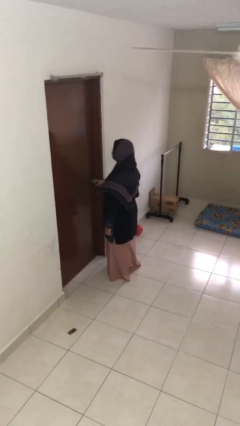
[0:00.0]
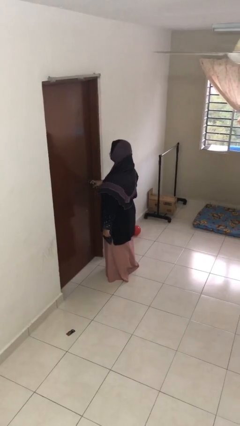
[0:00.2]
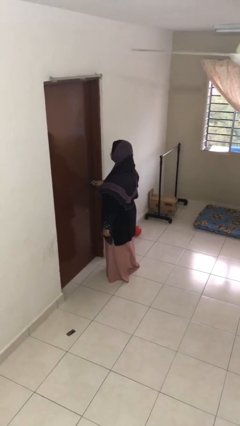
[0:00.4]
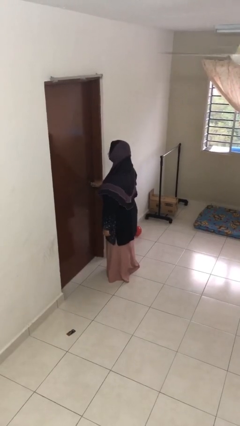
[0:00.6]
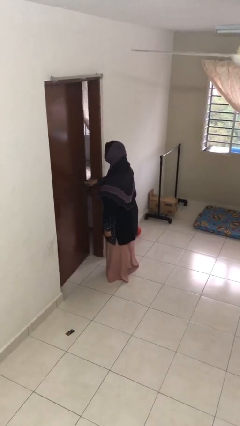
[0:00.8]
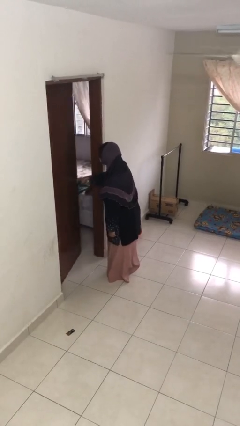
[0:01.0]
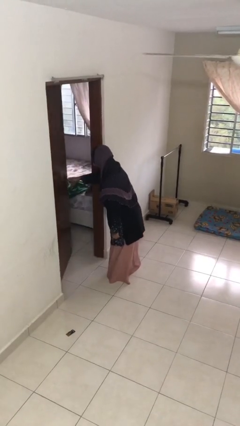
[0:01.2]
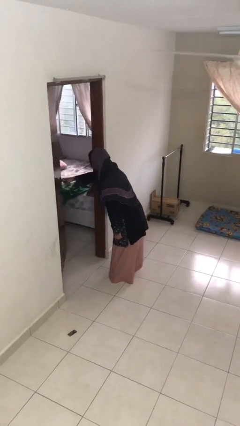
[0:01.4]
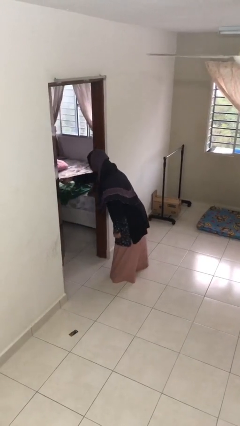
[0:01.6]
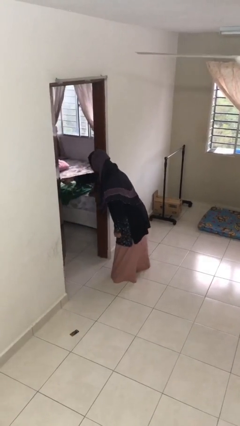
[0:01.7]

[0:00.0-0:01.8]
person opens facility door

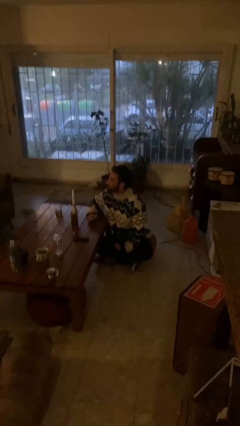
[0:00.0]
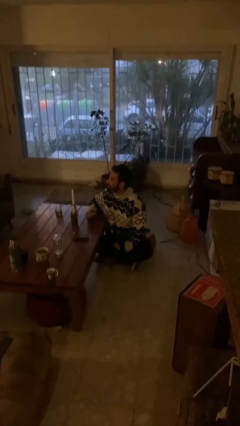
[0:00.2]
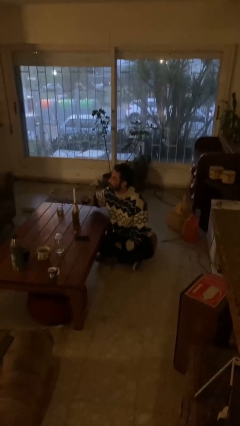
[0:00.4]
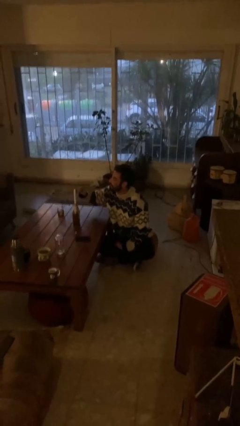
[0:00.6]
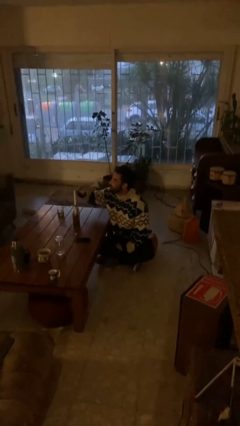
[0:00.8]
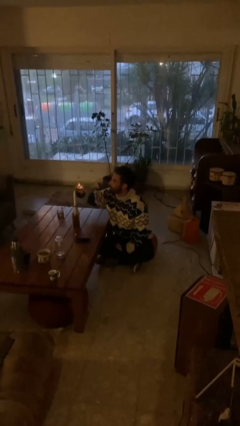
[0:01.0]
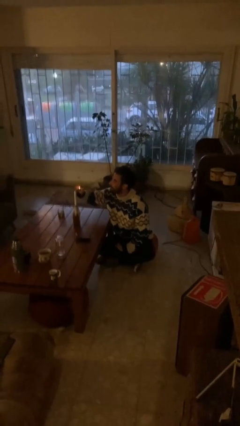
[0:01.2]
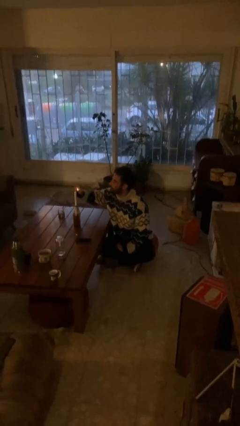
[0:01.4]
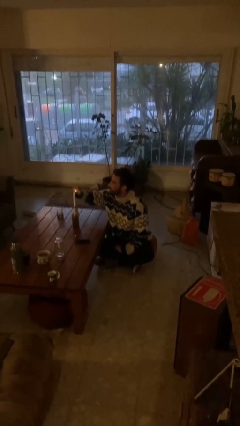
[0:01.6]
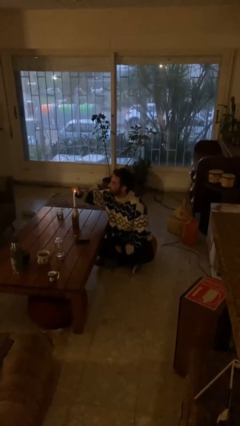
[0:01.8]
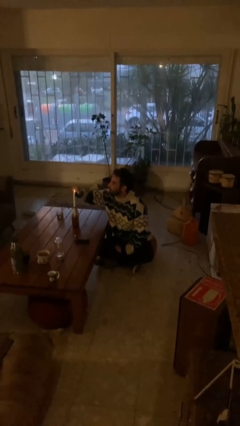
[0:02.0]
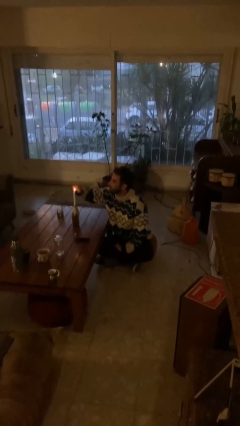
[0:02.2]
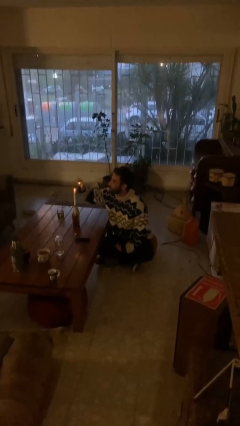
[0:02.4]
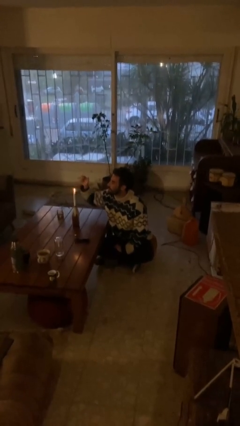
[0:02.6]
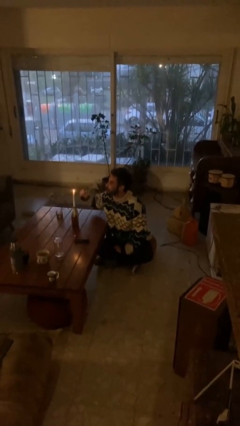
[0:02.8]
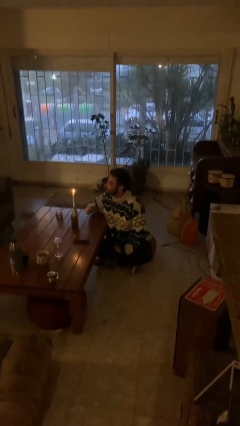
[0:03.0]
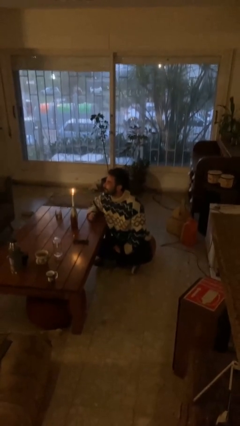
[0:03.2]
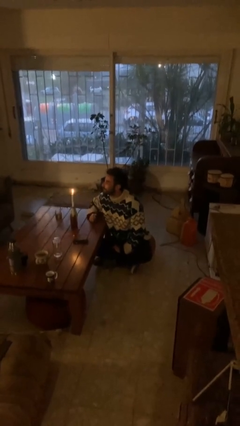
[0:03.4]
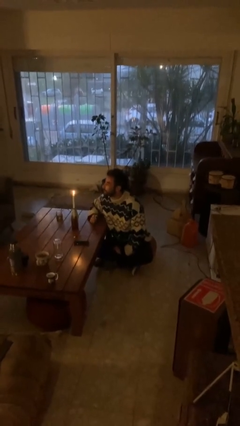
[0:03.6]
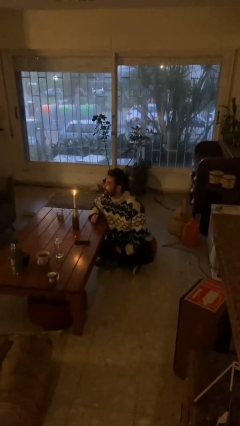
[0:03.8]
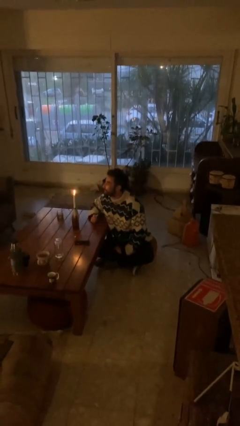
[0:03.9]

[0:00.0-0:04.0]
person lights candle

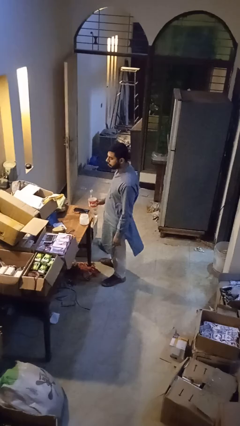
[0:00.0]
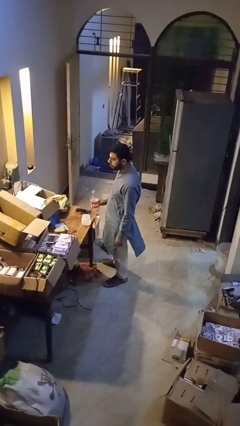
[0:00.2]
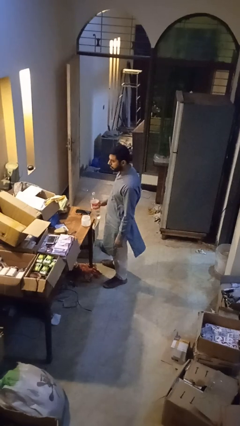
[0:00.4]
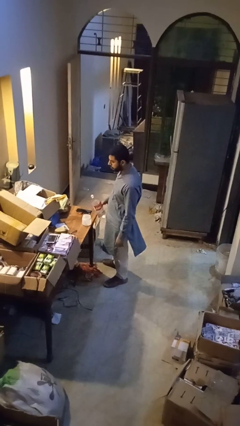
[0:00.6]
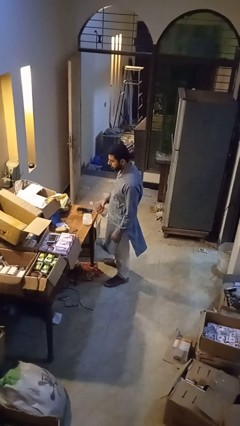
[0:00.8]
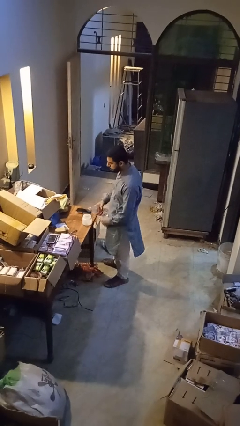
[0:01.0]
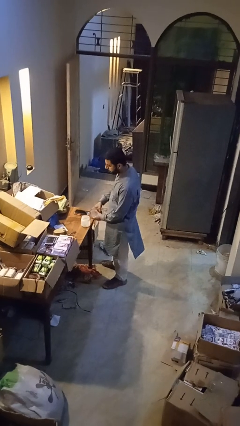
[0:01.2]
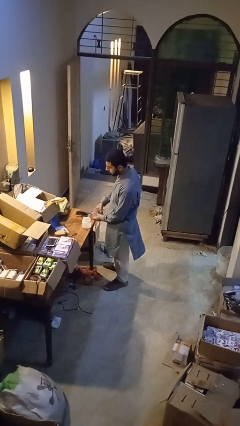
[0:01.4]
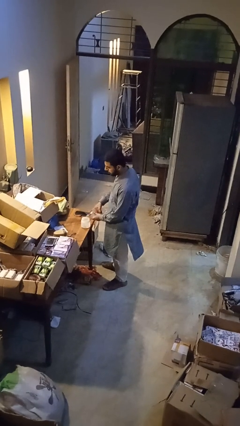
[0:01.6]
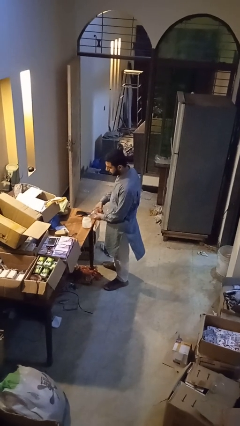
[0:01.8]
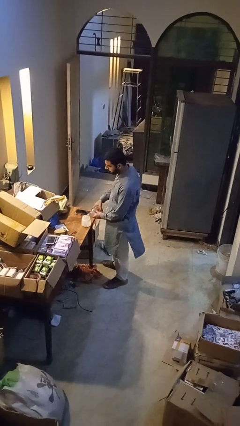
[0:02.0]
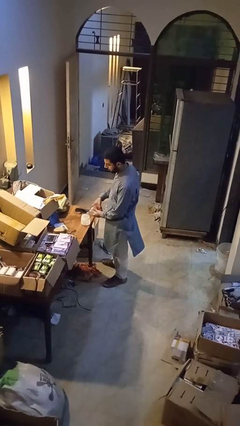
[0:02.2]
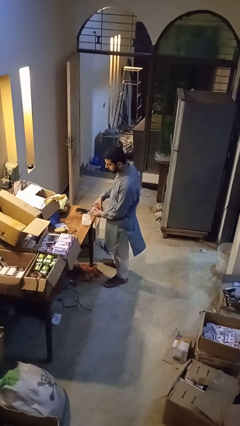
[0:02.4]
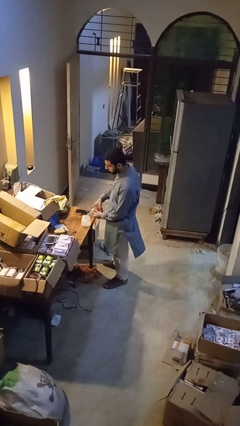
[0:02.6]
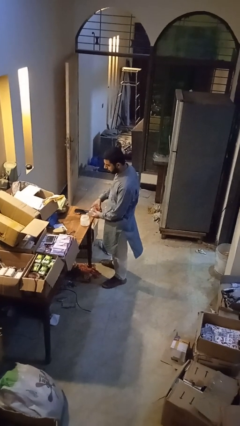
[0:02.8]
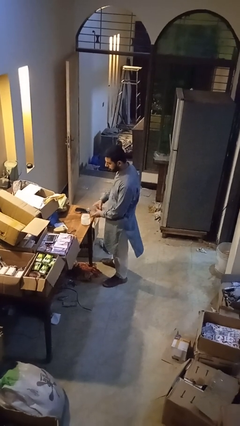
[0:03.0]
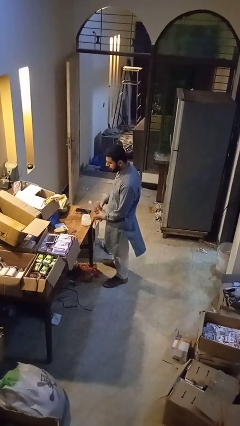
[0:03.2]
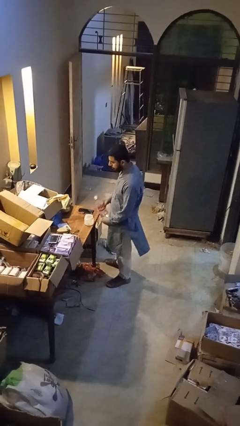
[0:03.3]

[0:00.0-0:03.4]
person pours liquid into cup

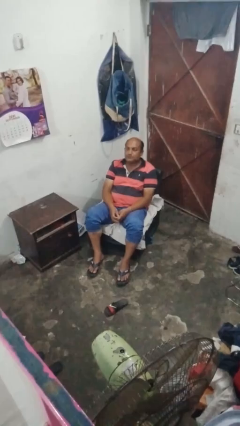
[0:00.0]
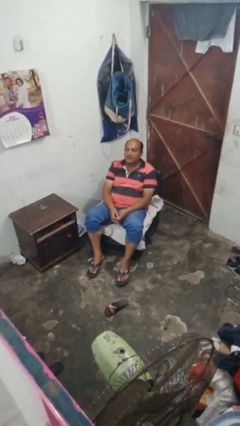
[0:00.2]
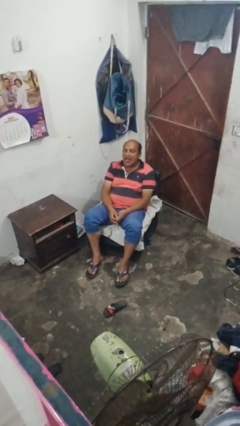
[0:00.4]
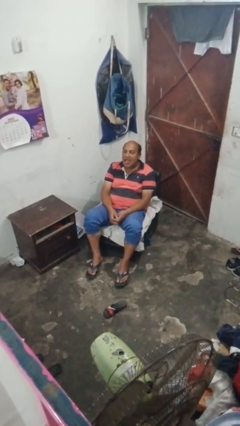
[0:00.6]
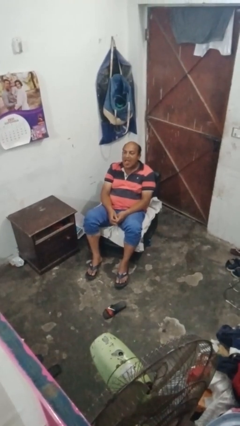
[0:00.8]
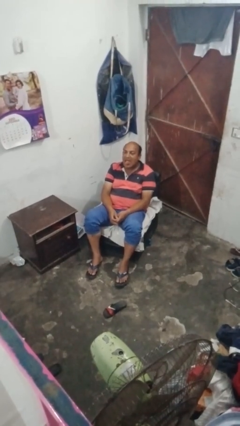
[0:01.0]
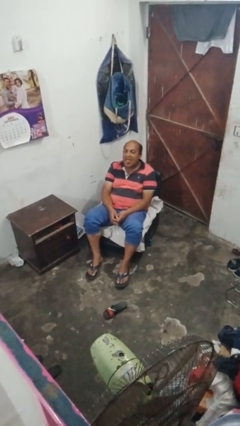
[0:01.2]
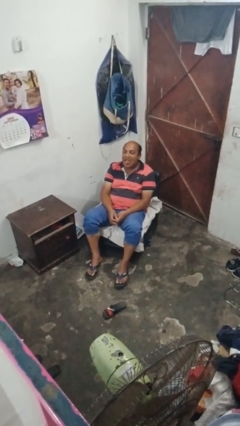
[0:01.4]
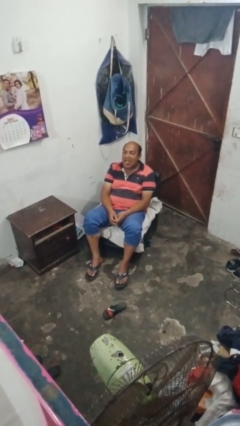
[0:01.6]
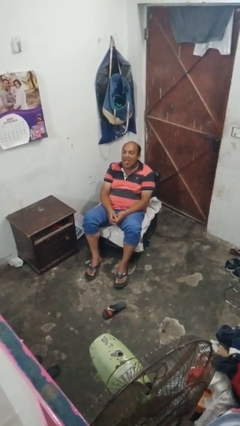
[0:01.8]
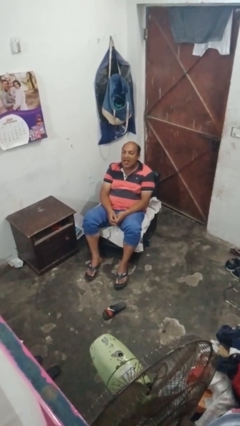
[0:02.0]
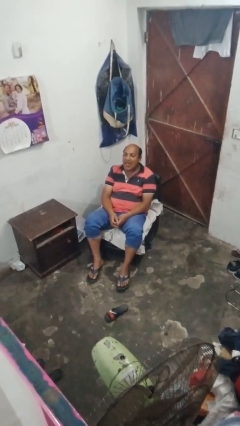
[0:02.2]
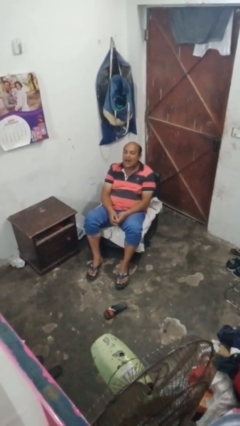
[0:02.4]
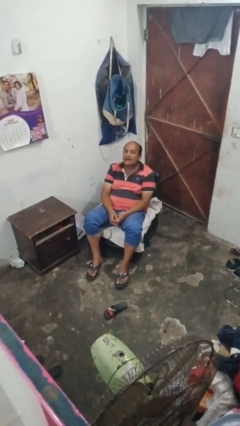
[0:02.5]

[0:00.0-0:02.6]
person sticks out tongue

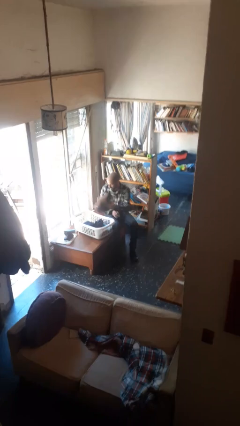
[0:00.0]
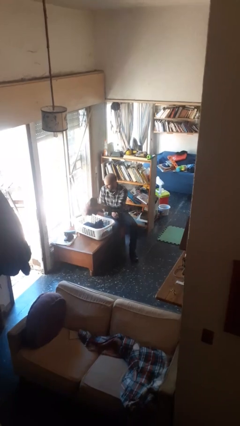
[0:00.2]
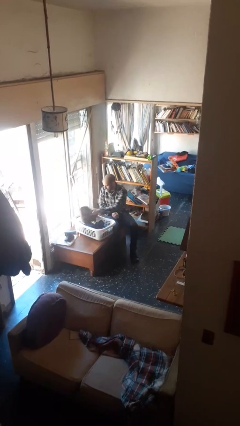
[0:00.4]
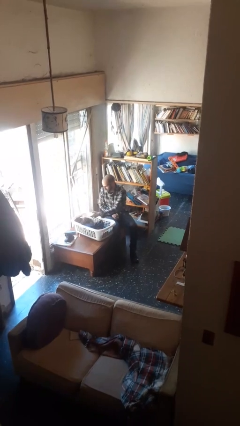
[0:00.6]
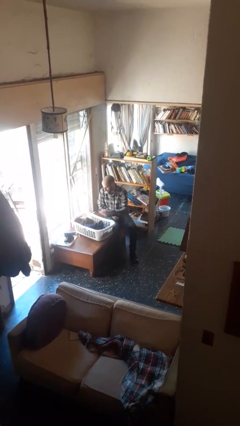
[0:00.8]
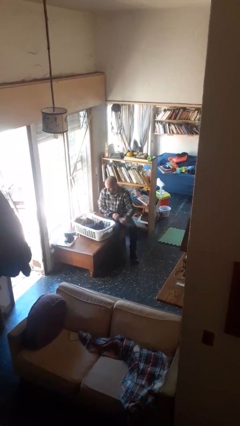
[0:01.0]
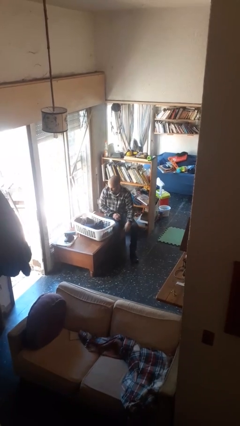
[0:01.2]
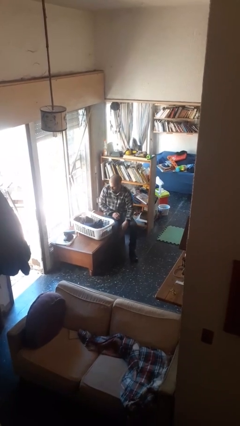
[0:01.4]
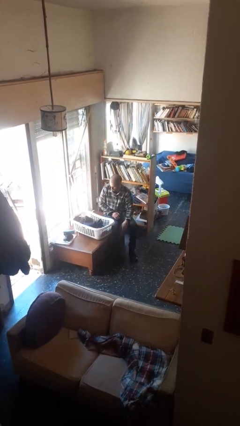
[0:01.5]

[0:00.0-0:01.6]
person puts object into basket

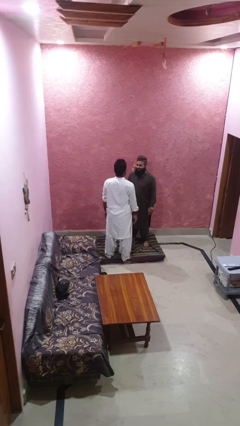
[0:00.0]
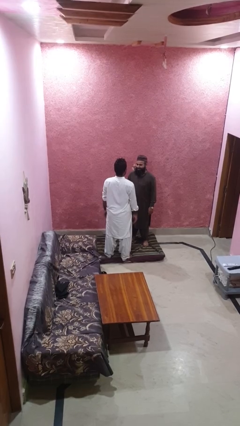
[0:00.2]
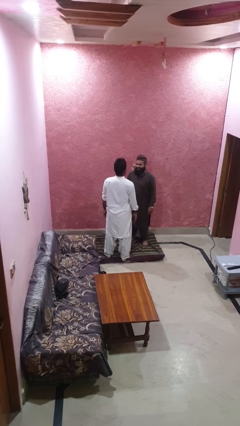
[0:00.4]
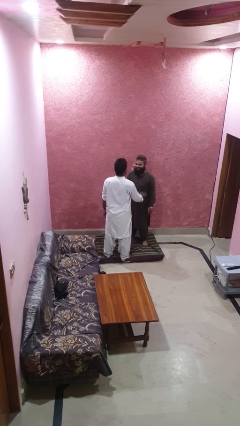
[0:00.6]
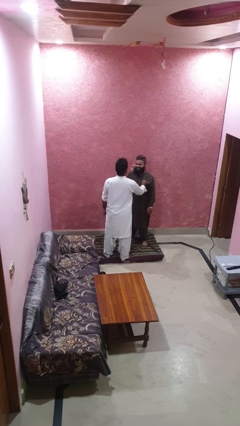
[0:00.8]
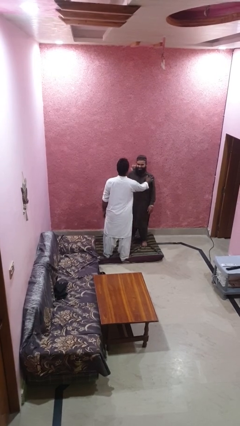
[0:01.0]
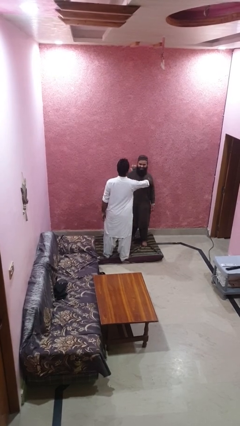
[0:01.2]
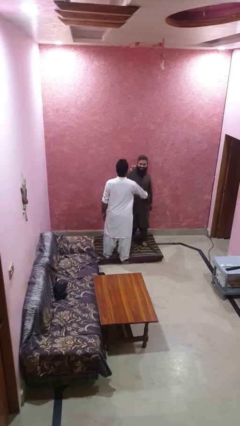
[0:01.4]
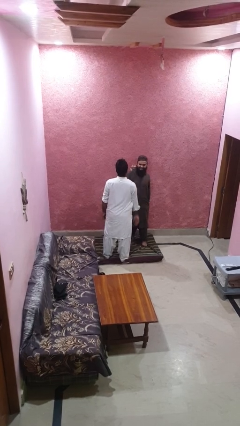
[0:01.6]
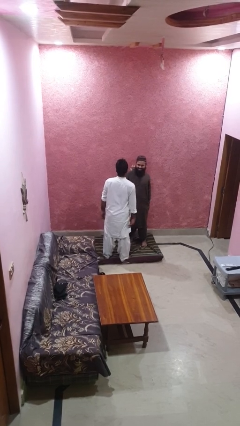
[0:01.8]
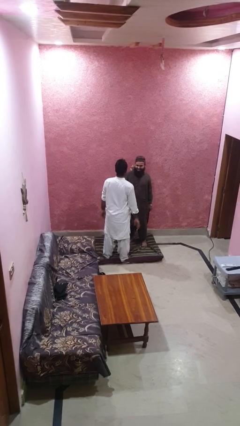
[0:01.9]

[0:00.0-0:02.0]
person shoves person

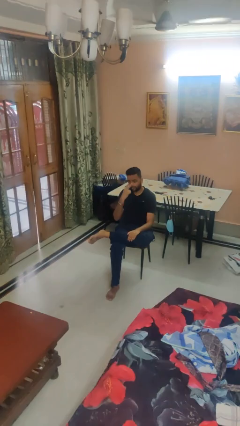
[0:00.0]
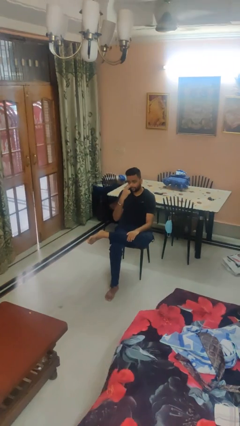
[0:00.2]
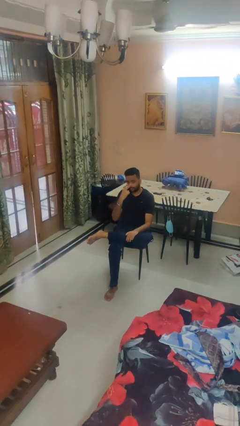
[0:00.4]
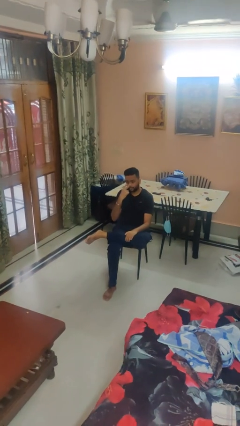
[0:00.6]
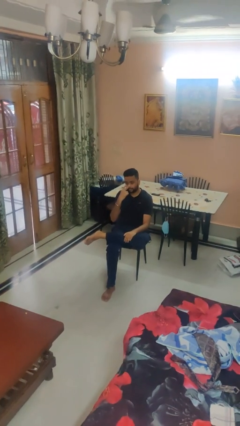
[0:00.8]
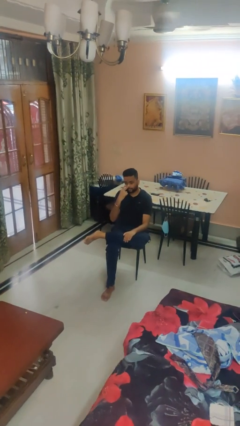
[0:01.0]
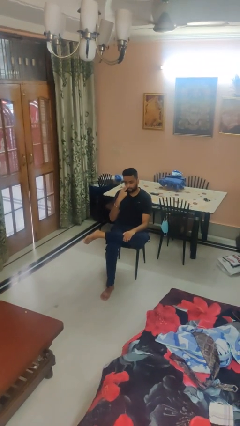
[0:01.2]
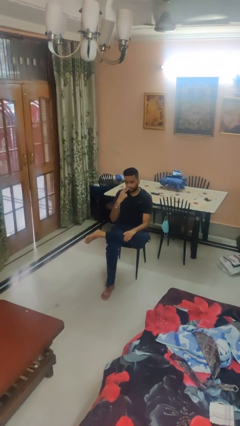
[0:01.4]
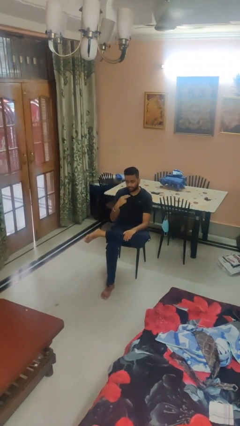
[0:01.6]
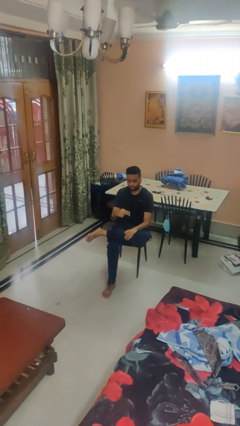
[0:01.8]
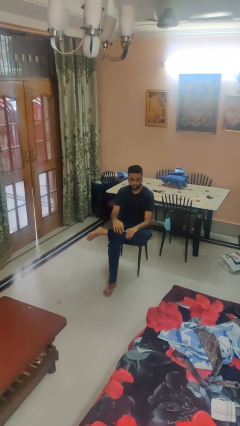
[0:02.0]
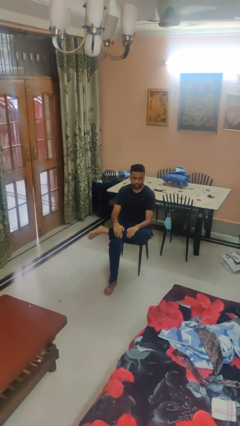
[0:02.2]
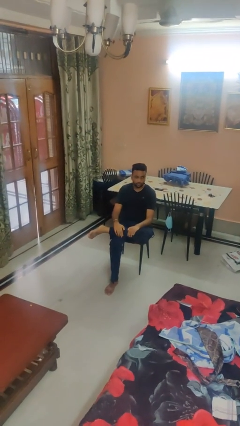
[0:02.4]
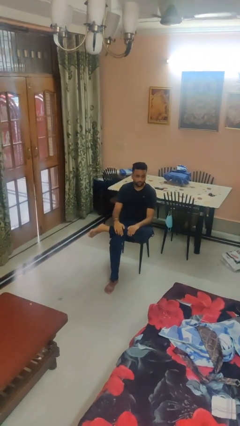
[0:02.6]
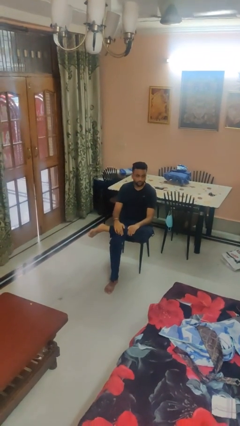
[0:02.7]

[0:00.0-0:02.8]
person gestures watch closely
